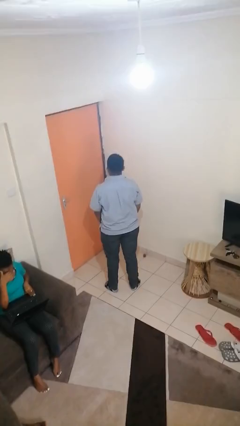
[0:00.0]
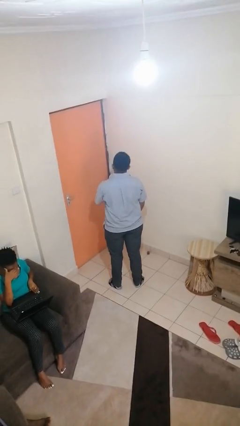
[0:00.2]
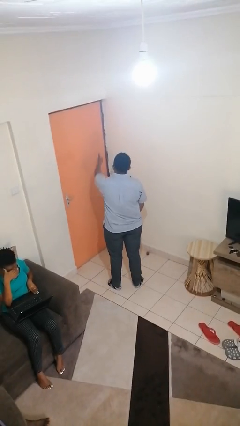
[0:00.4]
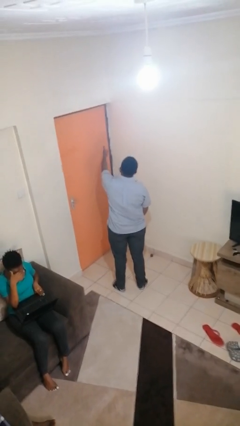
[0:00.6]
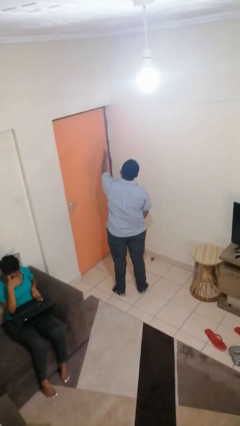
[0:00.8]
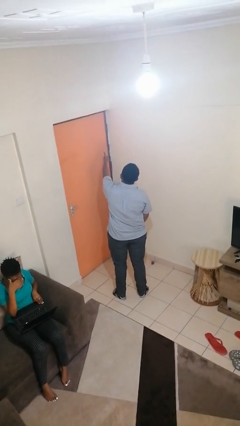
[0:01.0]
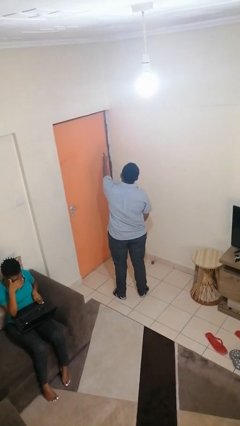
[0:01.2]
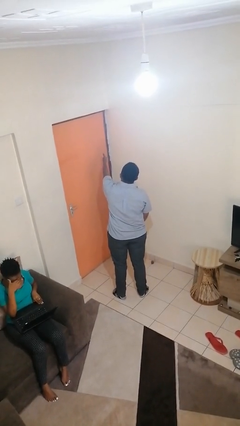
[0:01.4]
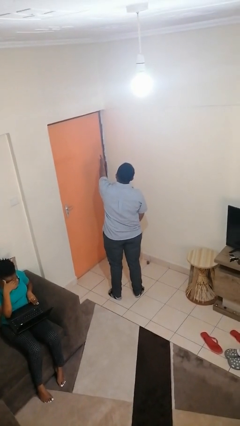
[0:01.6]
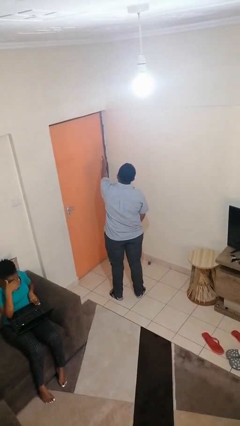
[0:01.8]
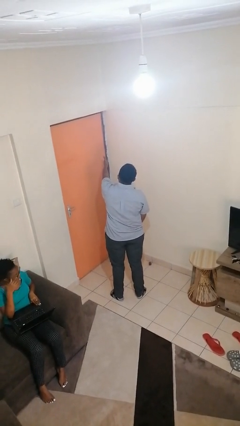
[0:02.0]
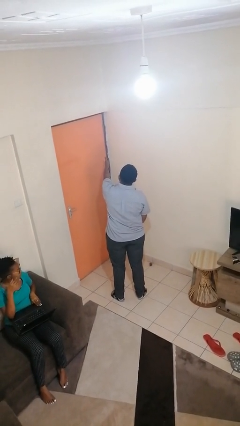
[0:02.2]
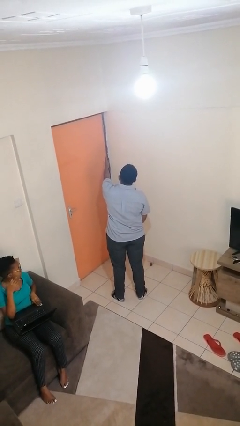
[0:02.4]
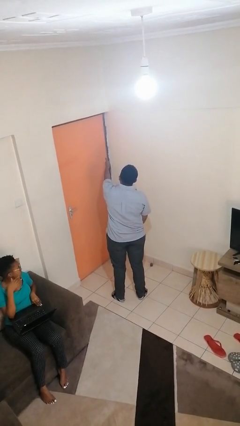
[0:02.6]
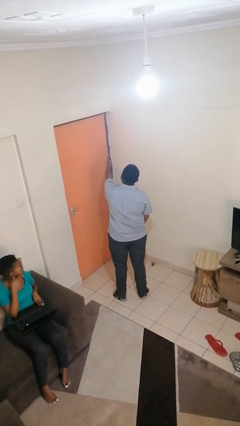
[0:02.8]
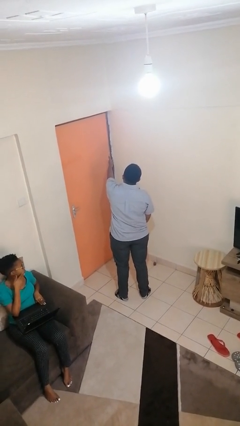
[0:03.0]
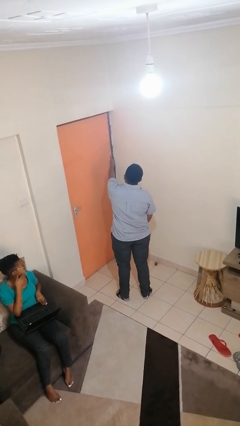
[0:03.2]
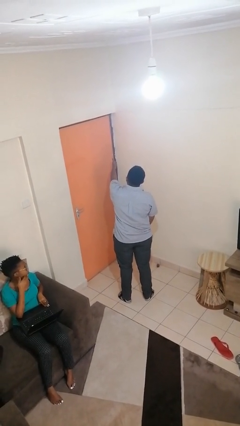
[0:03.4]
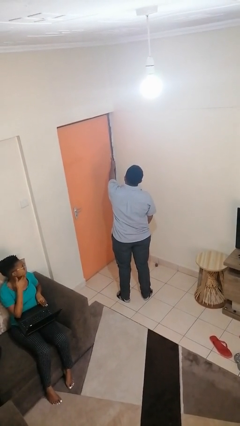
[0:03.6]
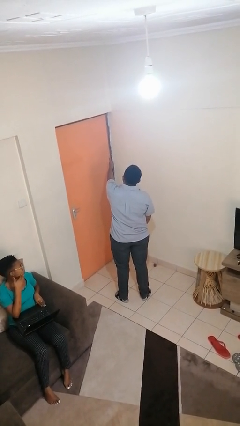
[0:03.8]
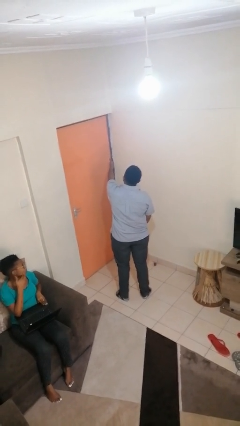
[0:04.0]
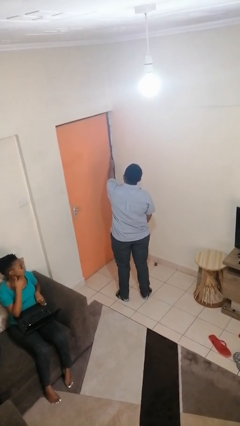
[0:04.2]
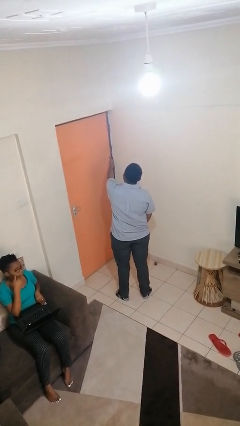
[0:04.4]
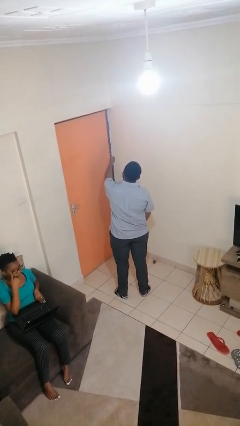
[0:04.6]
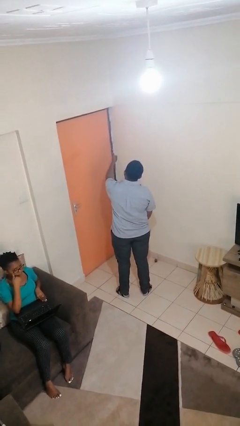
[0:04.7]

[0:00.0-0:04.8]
person gestures thumbs up

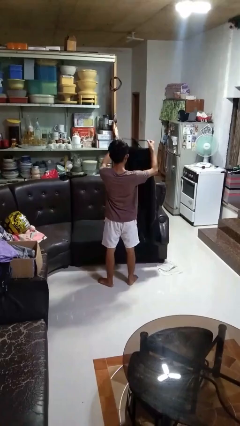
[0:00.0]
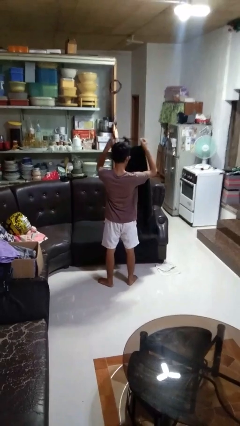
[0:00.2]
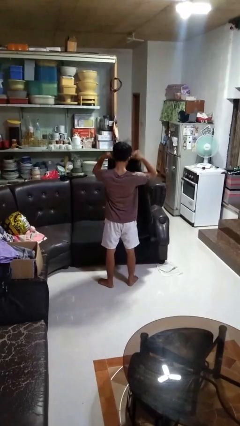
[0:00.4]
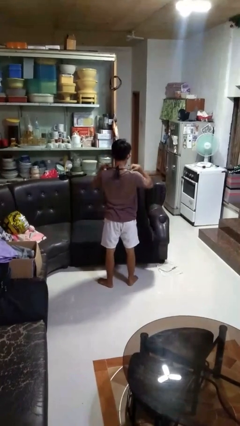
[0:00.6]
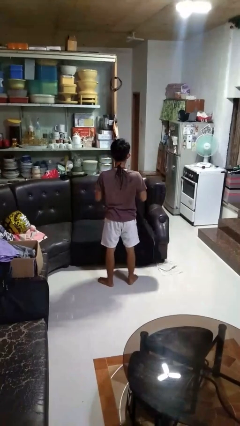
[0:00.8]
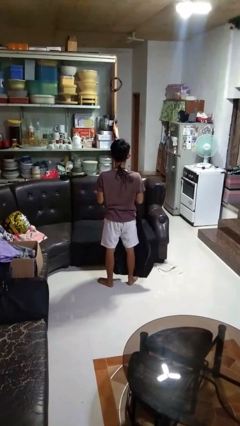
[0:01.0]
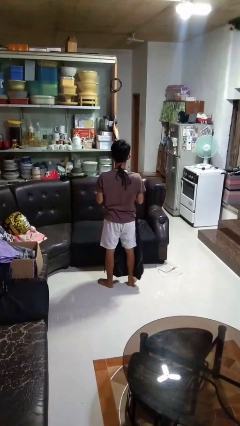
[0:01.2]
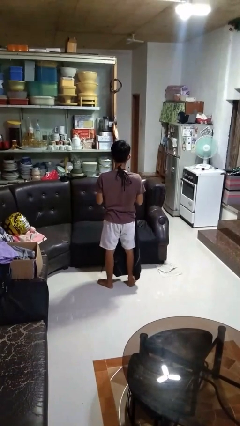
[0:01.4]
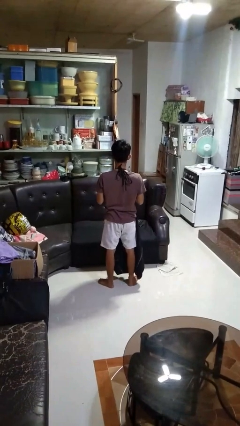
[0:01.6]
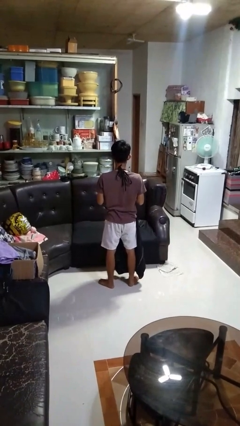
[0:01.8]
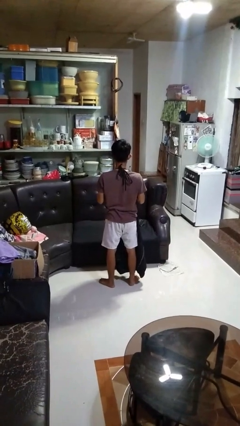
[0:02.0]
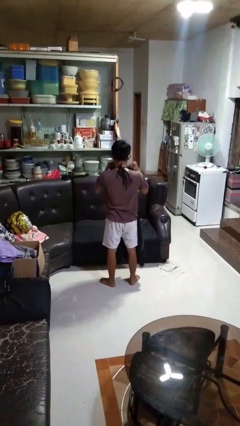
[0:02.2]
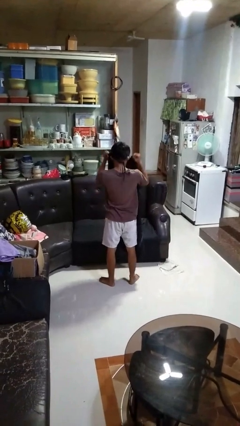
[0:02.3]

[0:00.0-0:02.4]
person puts on apron

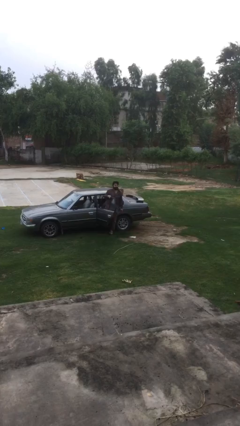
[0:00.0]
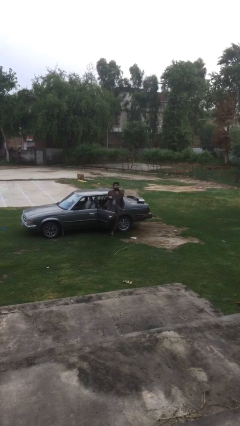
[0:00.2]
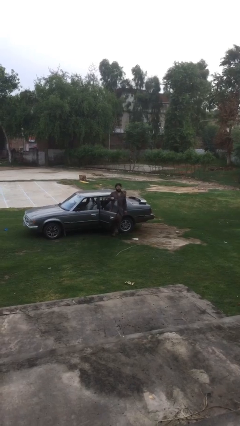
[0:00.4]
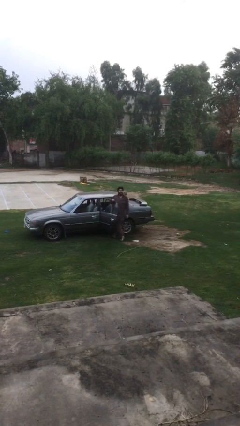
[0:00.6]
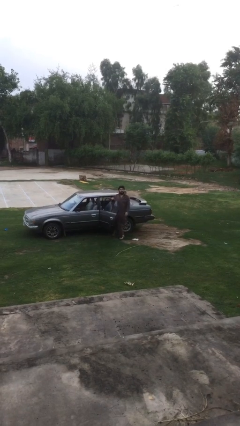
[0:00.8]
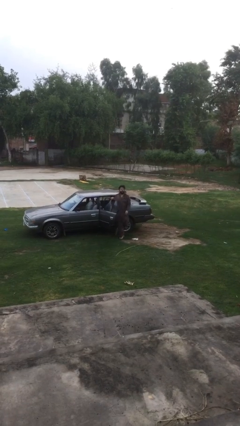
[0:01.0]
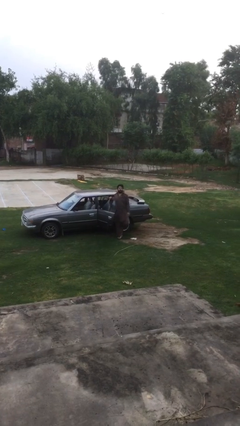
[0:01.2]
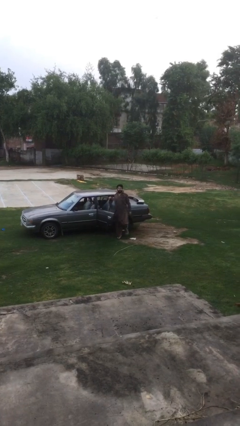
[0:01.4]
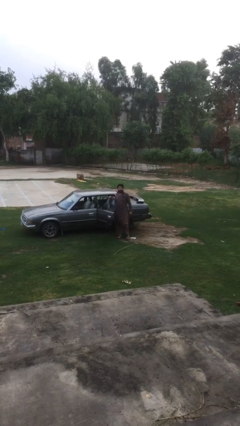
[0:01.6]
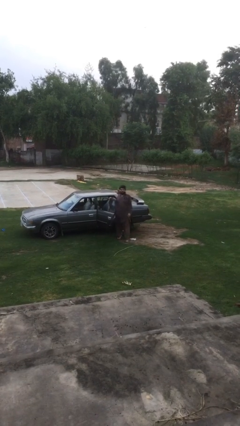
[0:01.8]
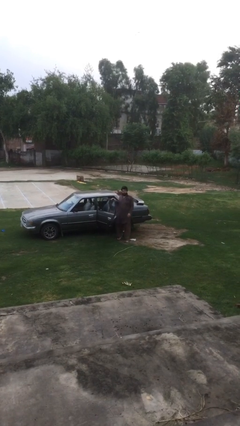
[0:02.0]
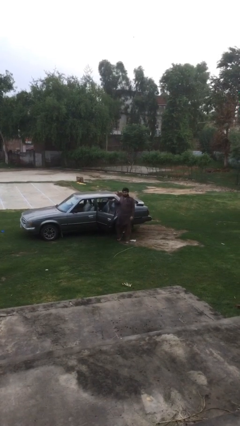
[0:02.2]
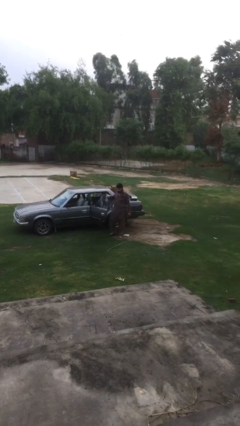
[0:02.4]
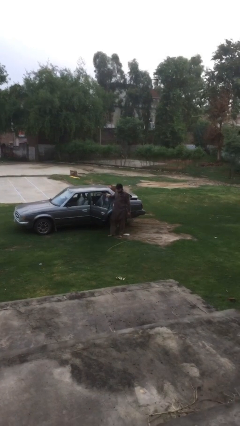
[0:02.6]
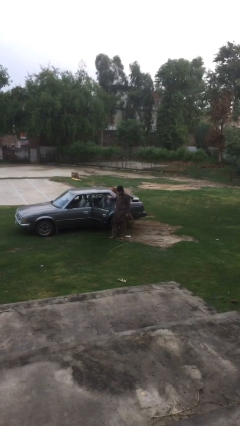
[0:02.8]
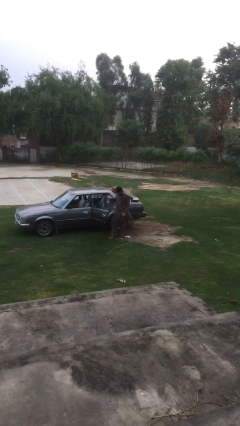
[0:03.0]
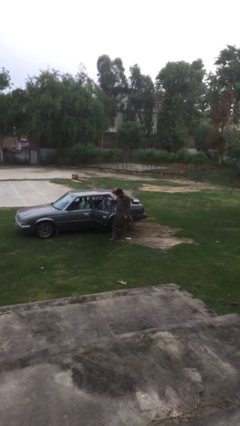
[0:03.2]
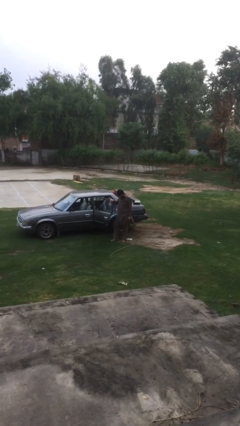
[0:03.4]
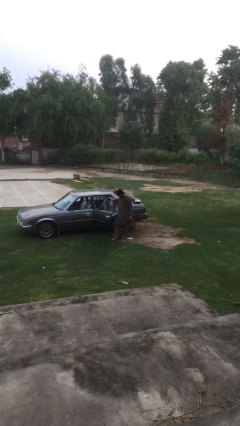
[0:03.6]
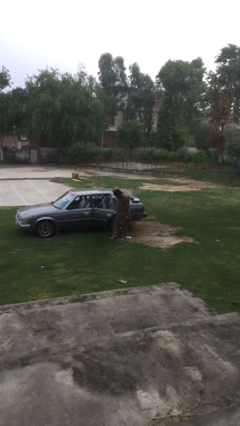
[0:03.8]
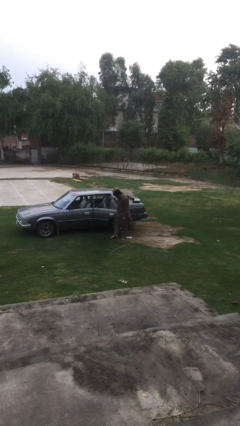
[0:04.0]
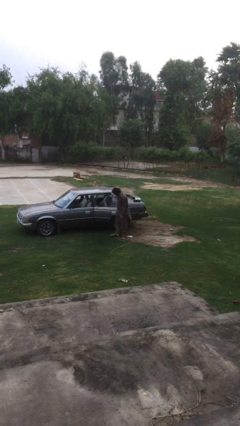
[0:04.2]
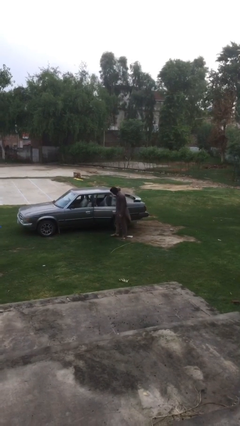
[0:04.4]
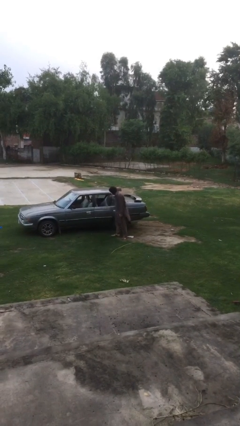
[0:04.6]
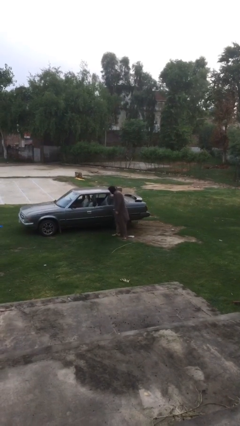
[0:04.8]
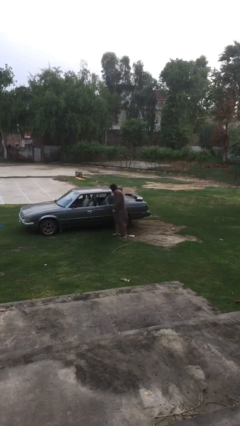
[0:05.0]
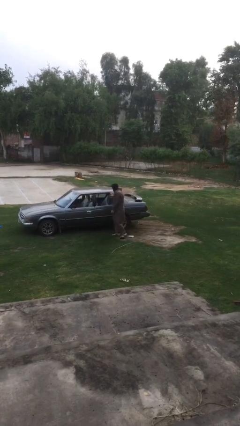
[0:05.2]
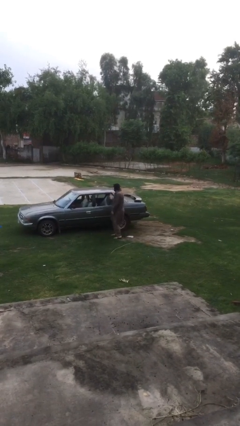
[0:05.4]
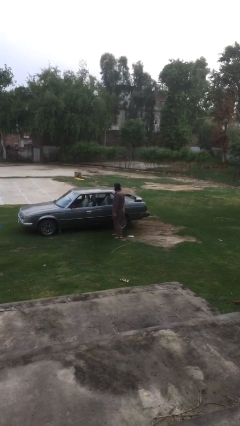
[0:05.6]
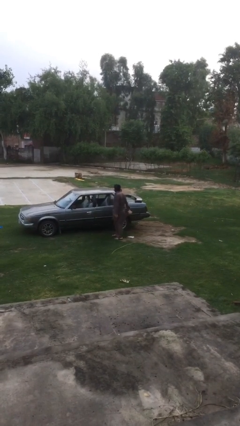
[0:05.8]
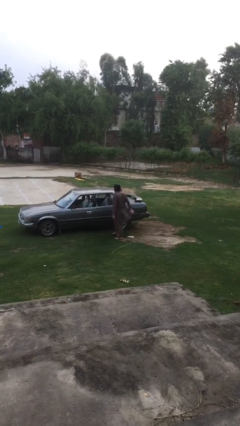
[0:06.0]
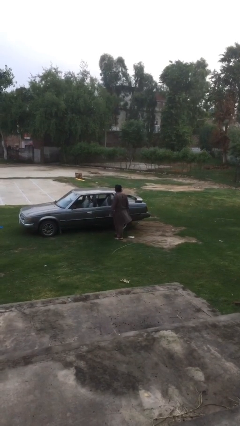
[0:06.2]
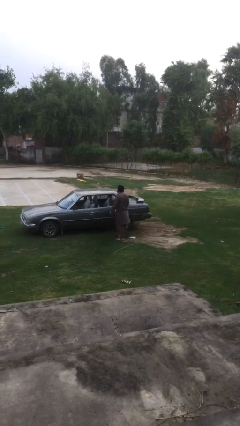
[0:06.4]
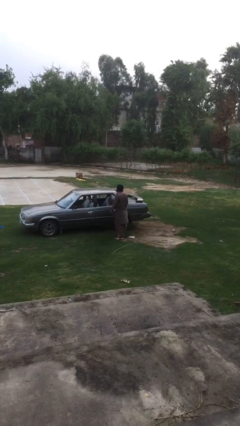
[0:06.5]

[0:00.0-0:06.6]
person closes car door

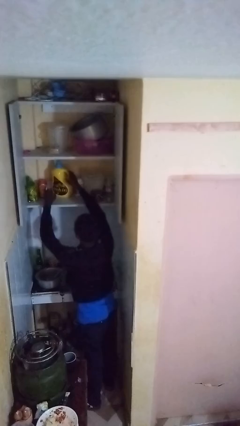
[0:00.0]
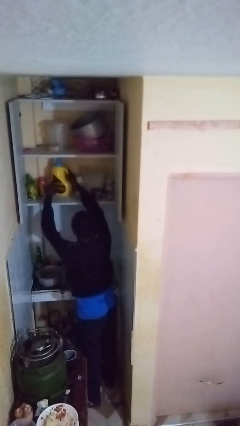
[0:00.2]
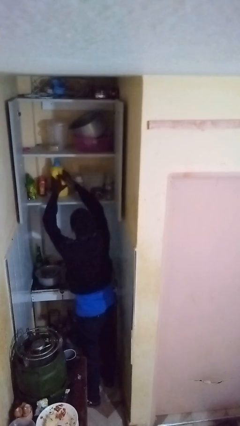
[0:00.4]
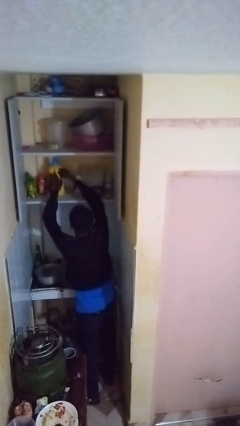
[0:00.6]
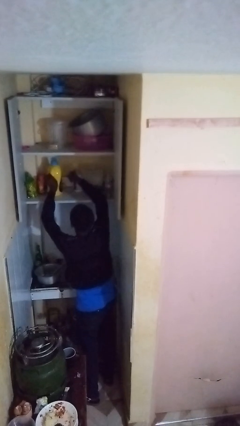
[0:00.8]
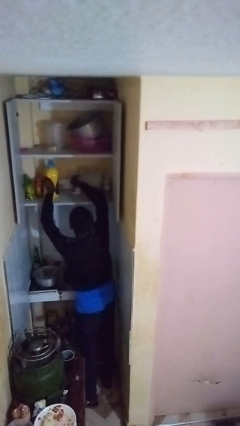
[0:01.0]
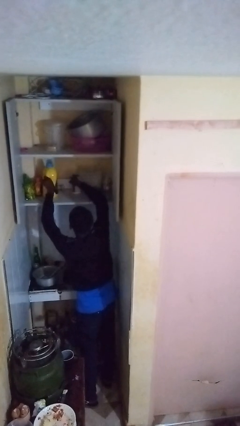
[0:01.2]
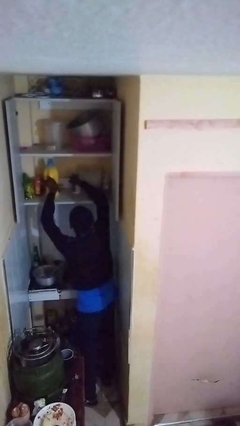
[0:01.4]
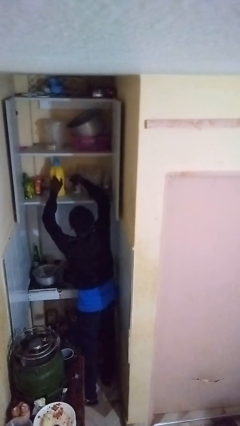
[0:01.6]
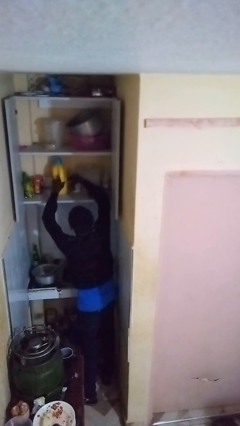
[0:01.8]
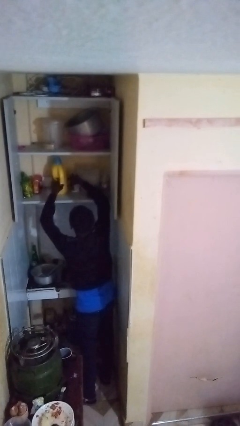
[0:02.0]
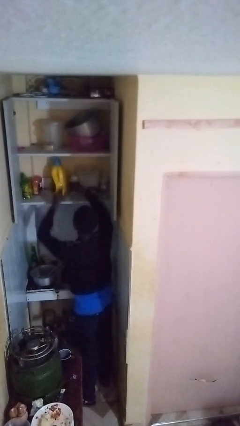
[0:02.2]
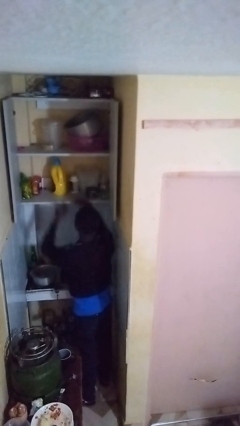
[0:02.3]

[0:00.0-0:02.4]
person searches in kitchen drawer

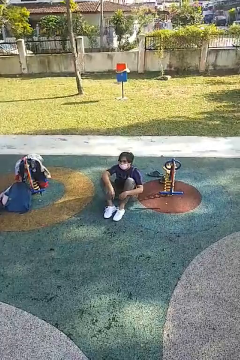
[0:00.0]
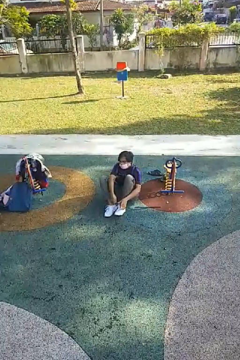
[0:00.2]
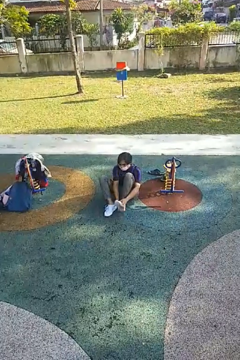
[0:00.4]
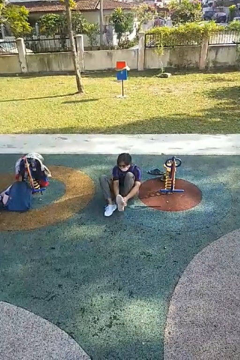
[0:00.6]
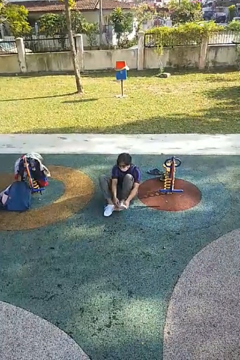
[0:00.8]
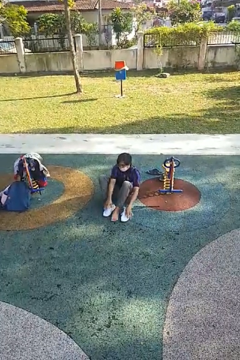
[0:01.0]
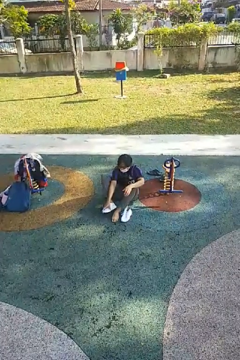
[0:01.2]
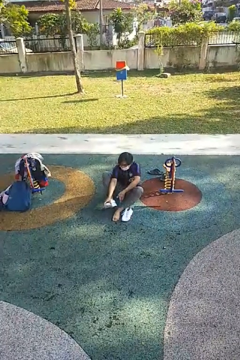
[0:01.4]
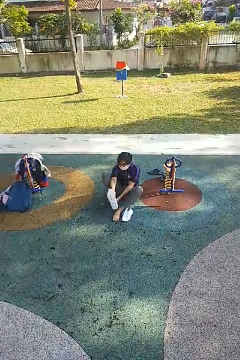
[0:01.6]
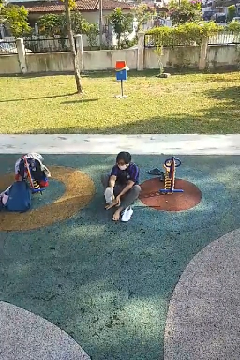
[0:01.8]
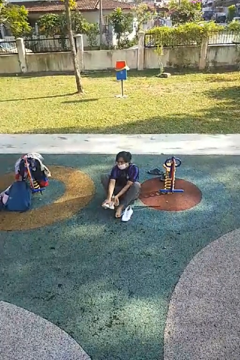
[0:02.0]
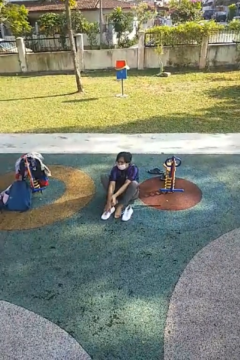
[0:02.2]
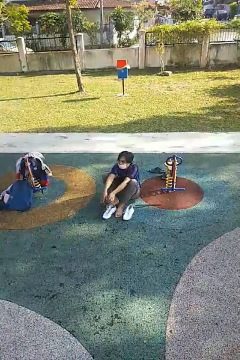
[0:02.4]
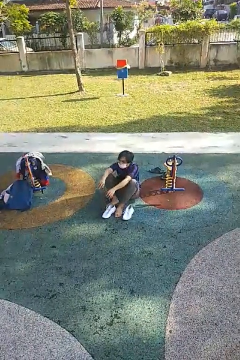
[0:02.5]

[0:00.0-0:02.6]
person takes off shoes
